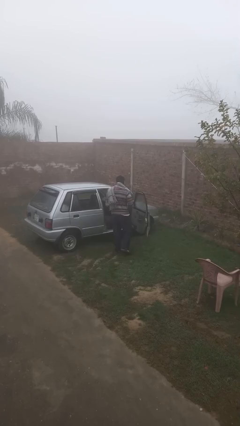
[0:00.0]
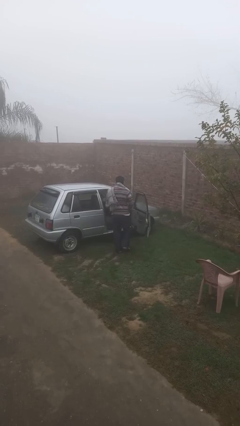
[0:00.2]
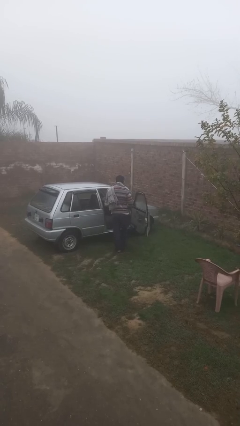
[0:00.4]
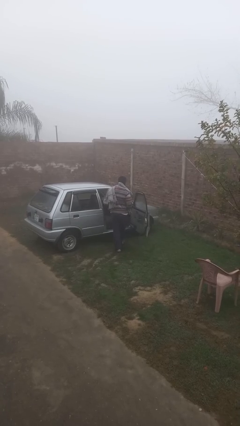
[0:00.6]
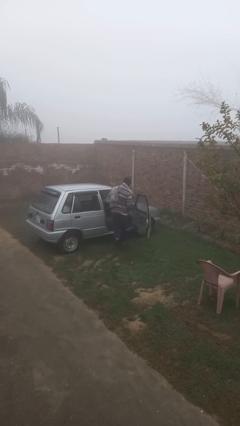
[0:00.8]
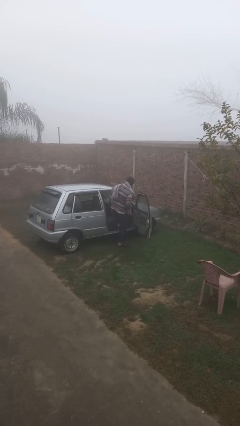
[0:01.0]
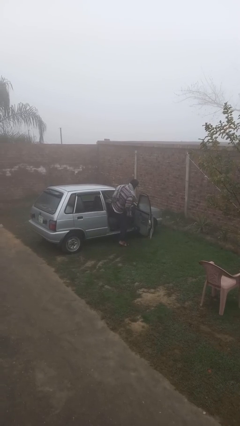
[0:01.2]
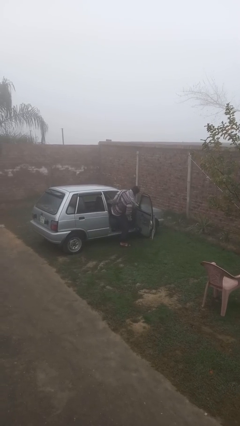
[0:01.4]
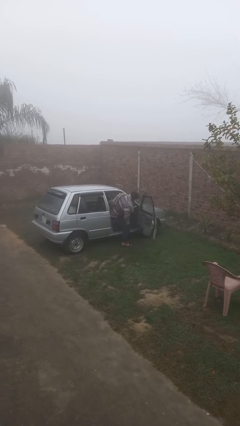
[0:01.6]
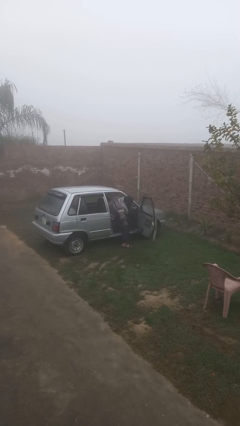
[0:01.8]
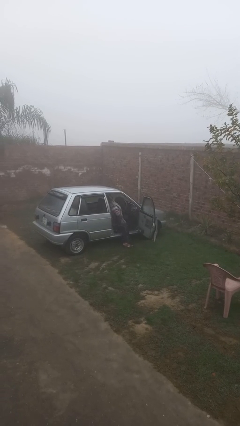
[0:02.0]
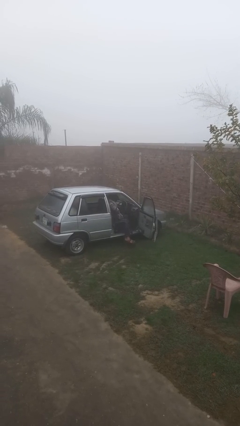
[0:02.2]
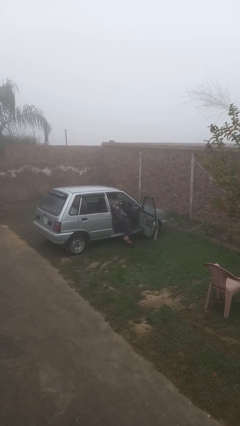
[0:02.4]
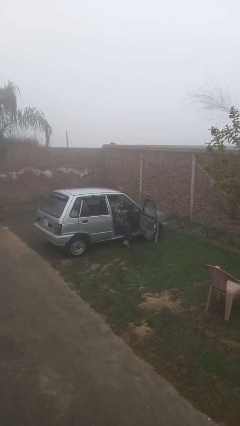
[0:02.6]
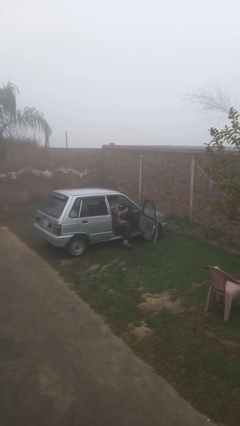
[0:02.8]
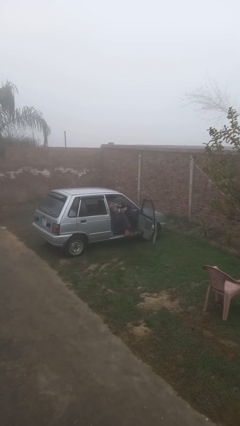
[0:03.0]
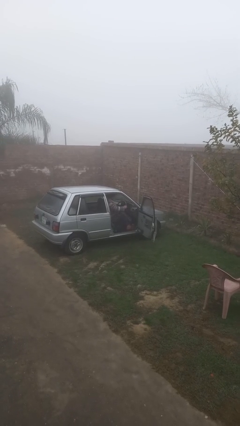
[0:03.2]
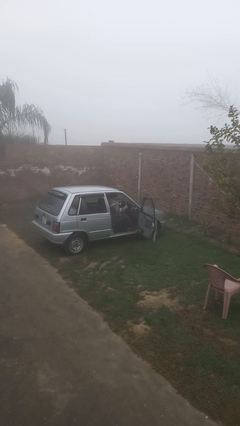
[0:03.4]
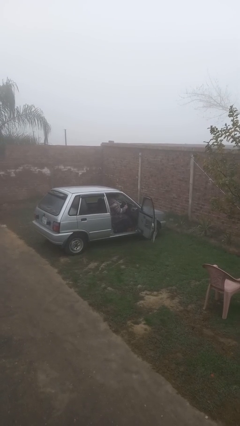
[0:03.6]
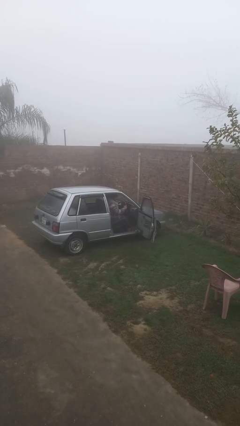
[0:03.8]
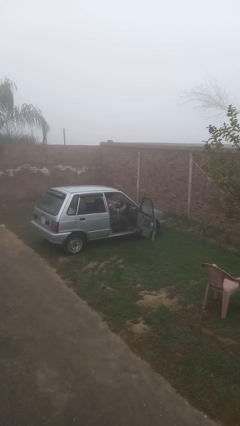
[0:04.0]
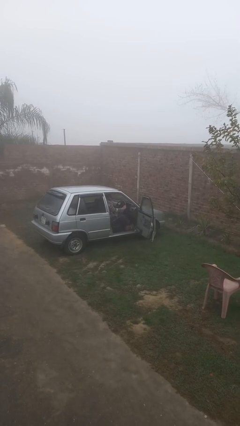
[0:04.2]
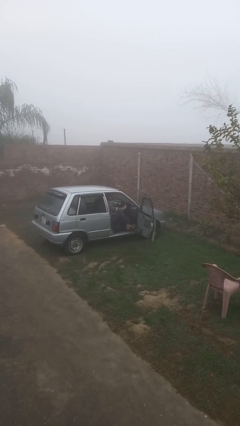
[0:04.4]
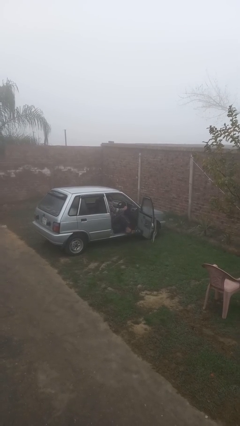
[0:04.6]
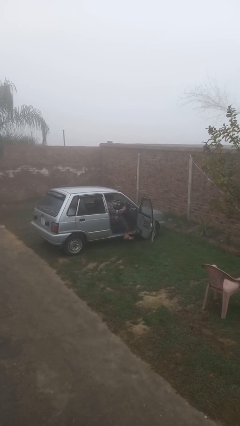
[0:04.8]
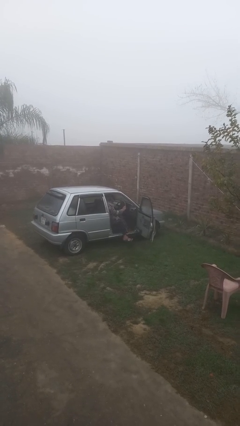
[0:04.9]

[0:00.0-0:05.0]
person enters car

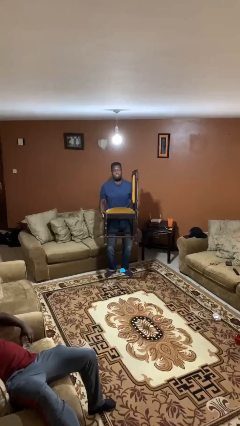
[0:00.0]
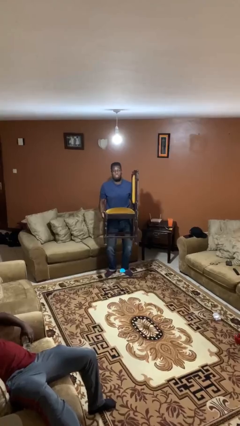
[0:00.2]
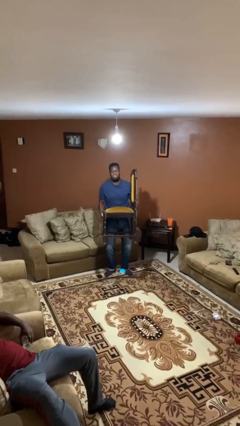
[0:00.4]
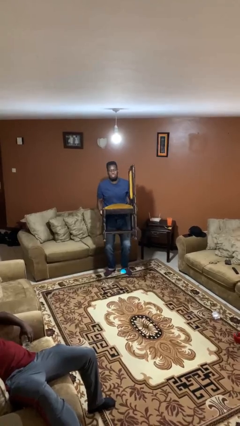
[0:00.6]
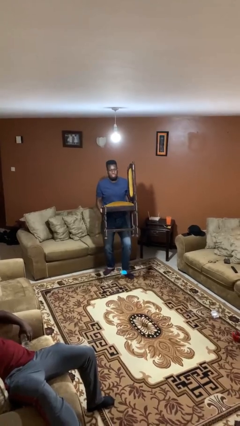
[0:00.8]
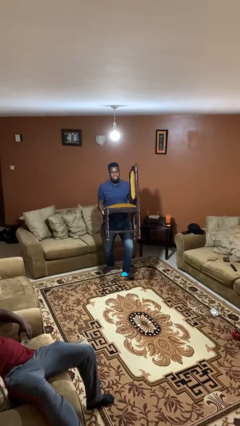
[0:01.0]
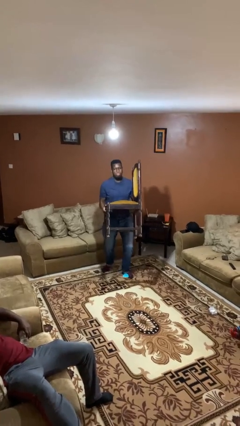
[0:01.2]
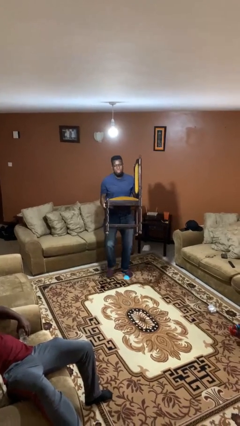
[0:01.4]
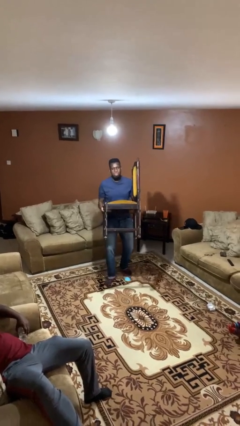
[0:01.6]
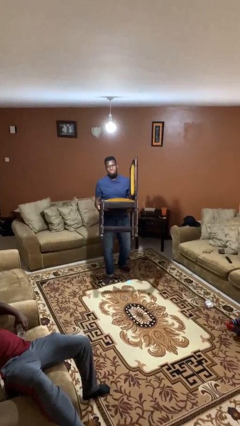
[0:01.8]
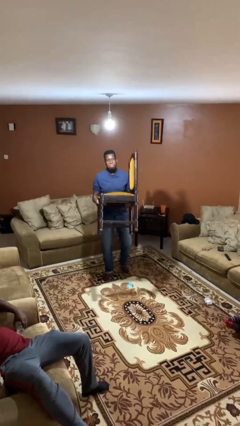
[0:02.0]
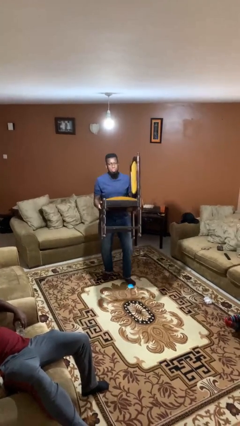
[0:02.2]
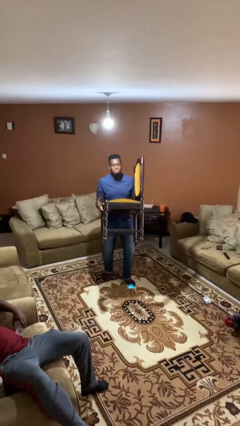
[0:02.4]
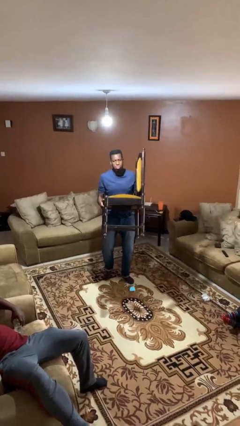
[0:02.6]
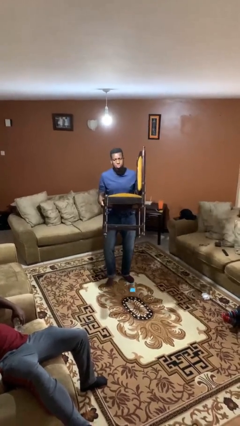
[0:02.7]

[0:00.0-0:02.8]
person carries heavy object

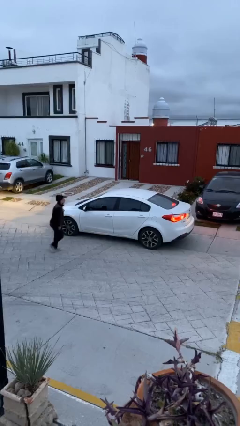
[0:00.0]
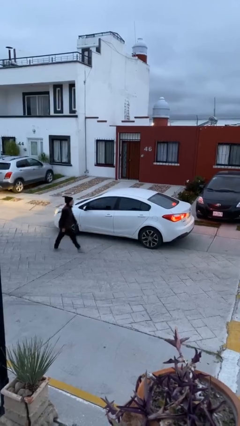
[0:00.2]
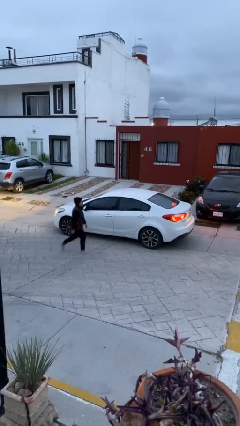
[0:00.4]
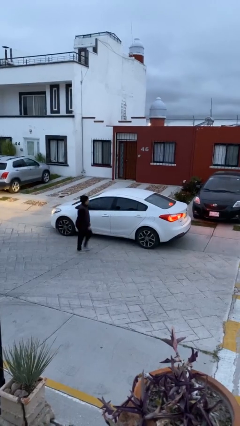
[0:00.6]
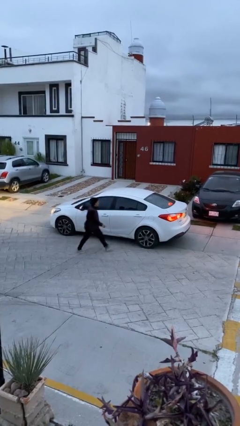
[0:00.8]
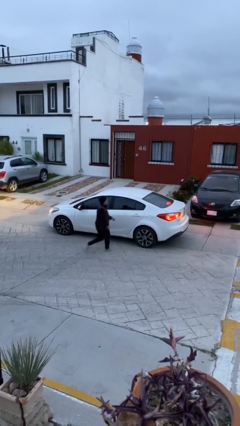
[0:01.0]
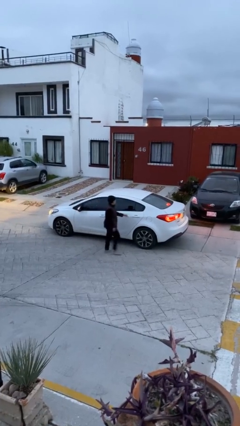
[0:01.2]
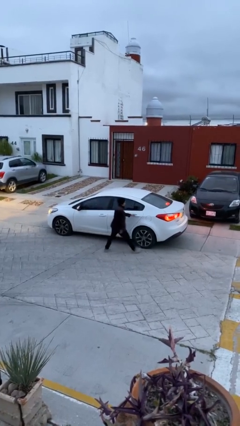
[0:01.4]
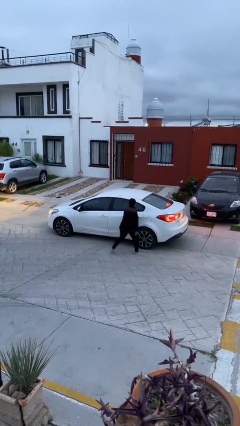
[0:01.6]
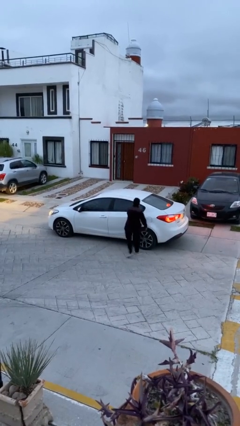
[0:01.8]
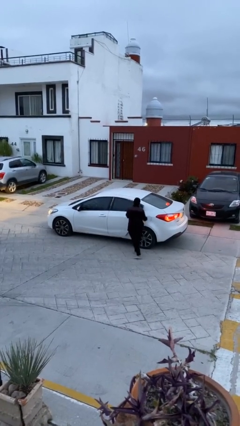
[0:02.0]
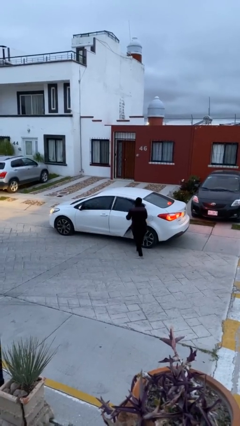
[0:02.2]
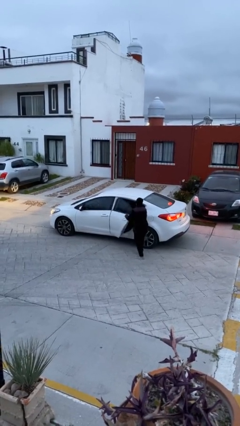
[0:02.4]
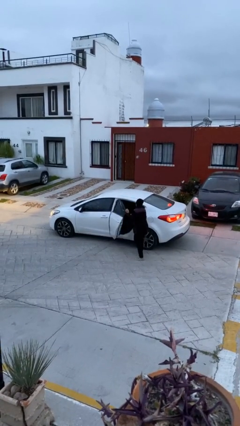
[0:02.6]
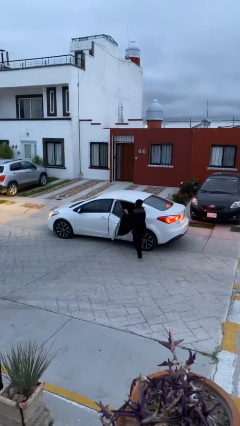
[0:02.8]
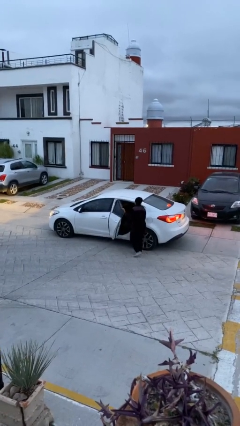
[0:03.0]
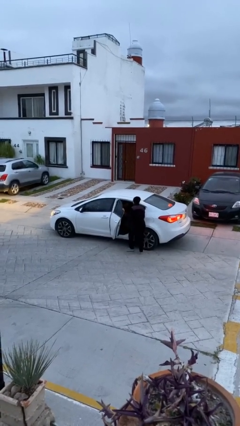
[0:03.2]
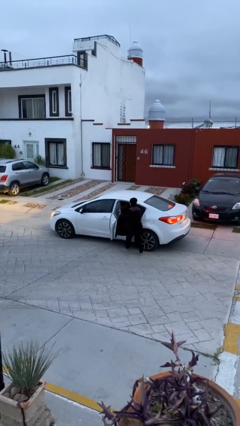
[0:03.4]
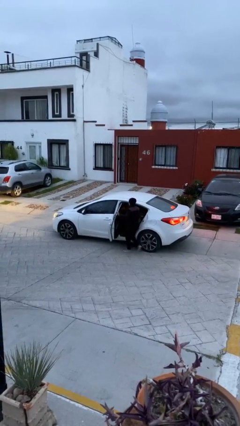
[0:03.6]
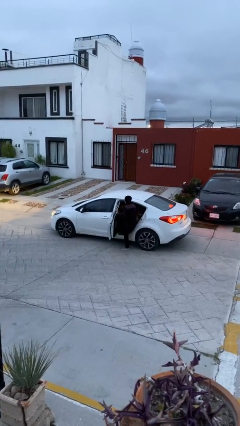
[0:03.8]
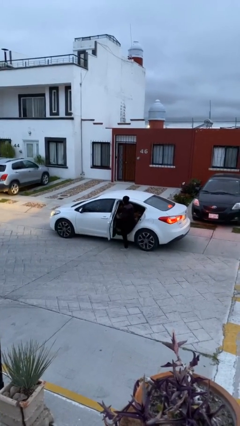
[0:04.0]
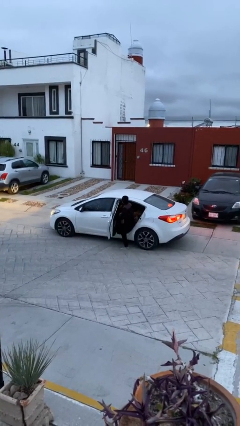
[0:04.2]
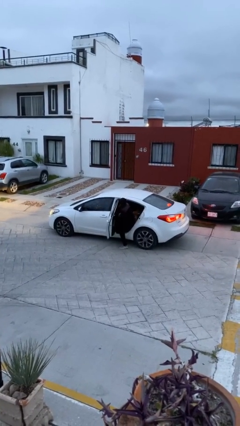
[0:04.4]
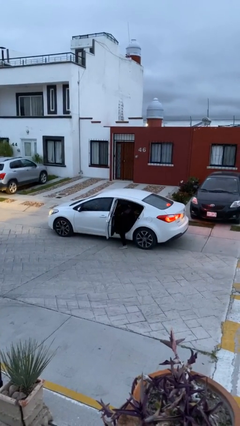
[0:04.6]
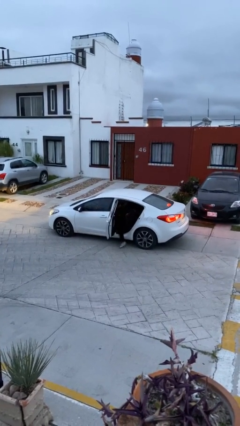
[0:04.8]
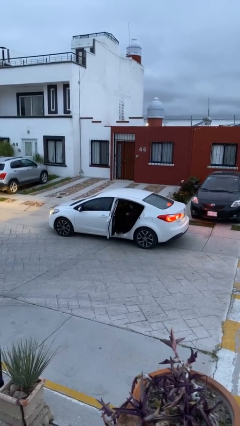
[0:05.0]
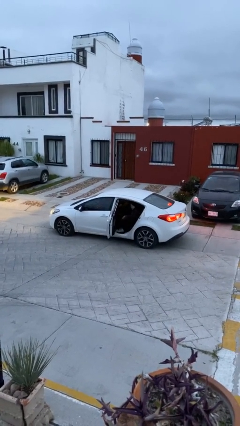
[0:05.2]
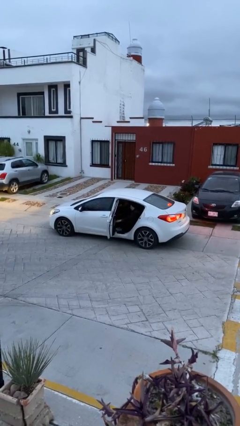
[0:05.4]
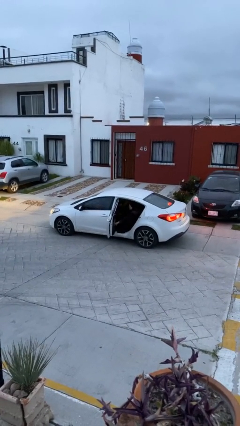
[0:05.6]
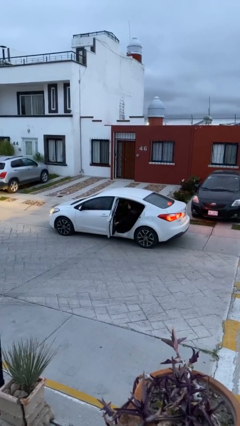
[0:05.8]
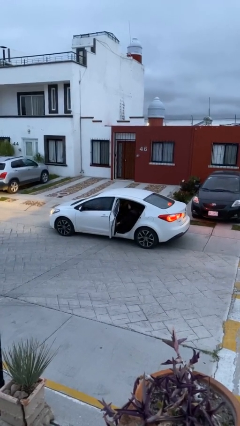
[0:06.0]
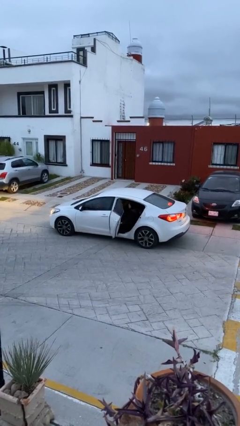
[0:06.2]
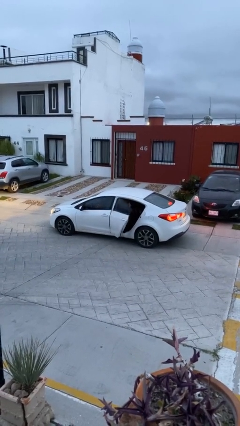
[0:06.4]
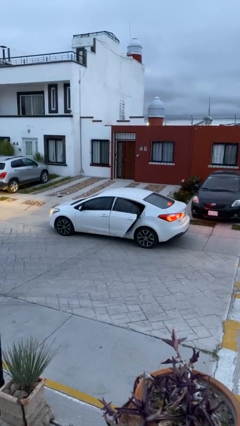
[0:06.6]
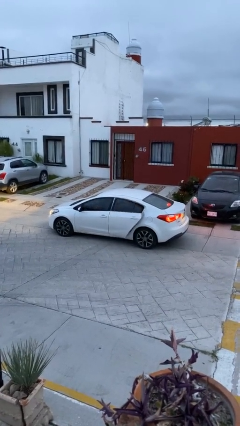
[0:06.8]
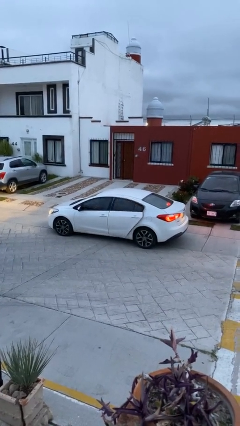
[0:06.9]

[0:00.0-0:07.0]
car picks up person

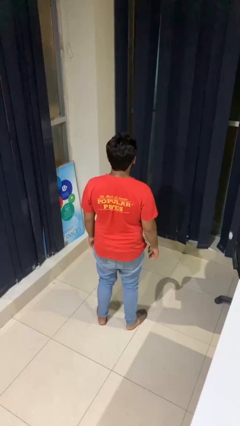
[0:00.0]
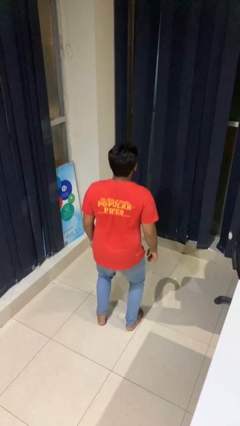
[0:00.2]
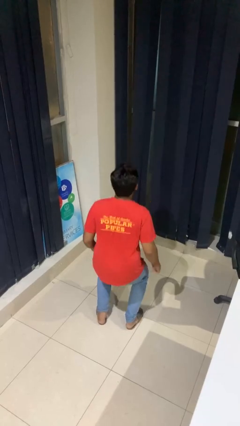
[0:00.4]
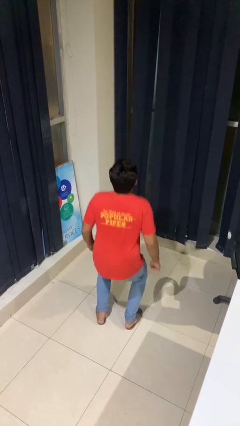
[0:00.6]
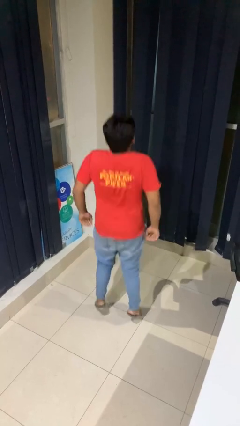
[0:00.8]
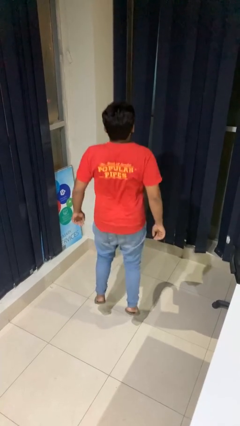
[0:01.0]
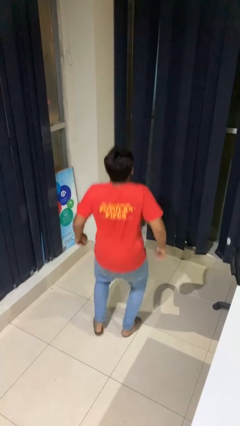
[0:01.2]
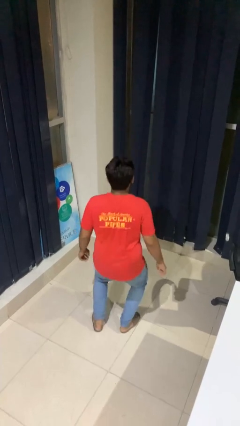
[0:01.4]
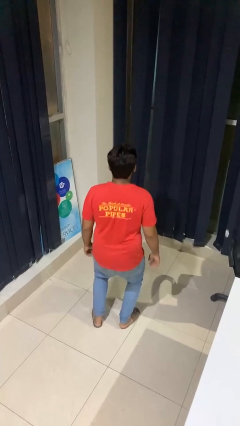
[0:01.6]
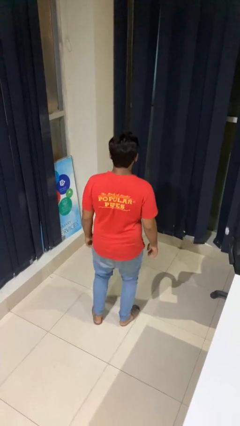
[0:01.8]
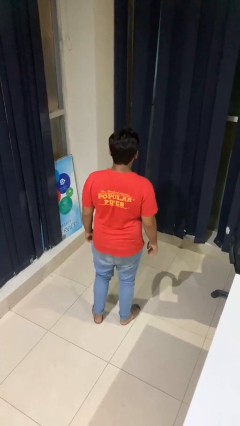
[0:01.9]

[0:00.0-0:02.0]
person jumps

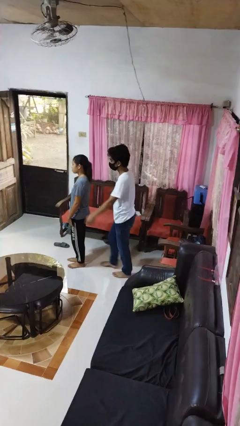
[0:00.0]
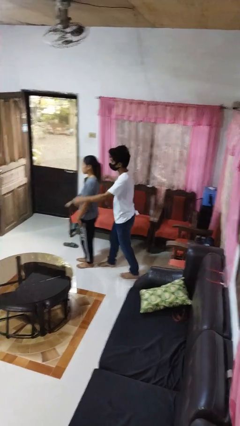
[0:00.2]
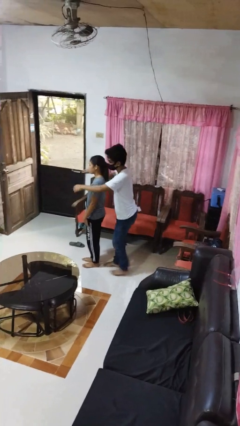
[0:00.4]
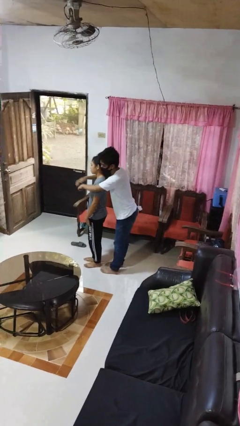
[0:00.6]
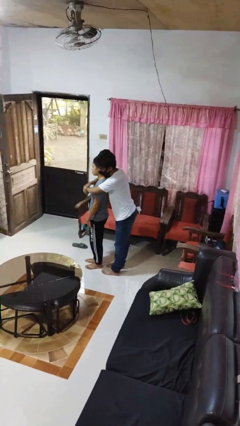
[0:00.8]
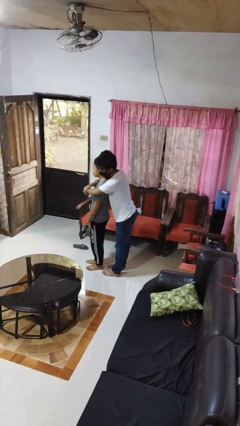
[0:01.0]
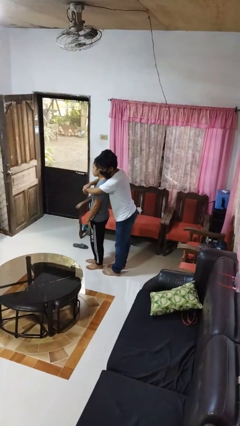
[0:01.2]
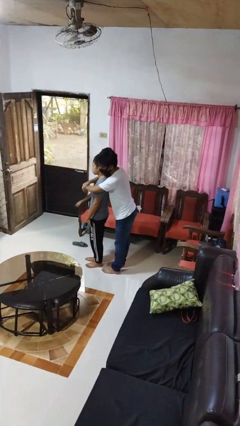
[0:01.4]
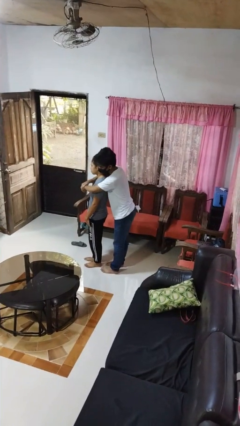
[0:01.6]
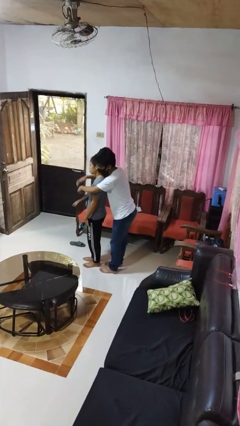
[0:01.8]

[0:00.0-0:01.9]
person hugs person from behind
